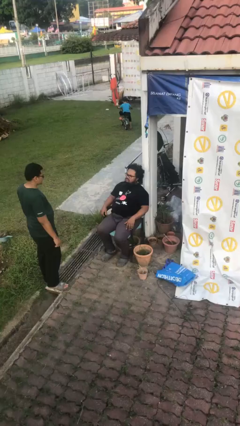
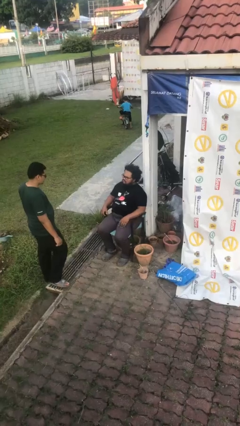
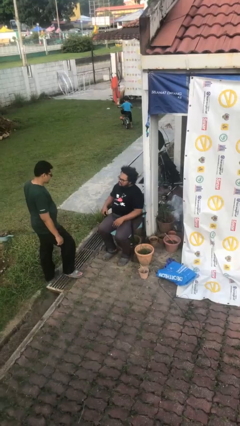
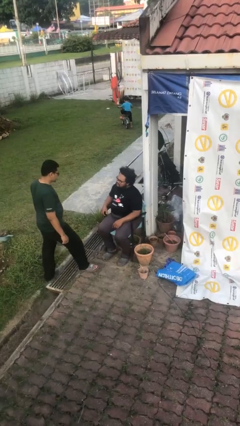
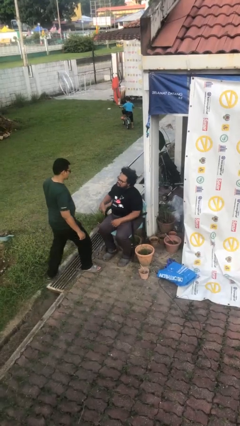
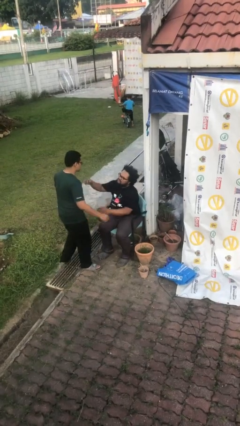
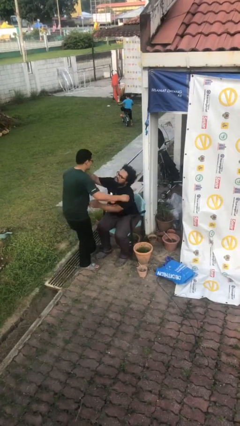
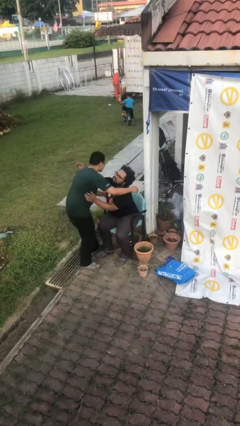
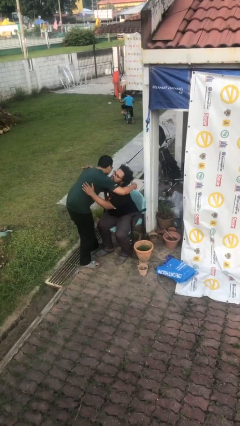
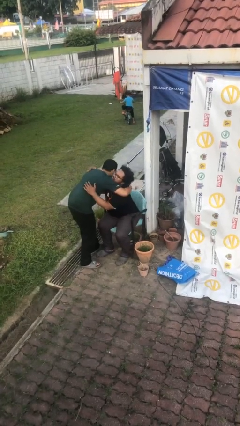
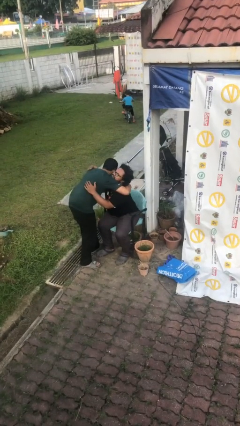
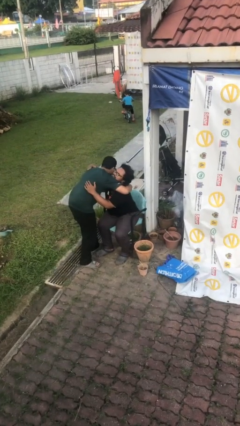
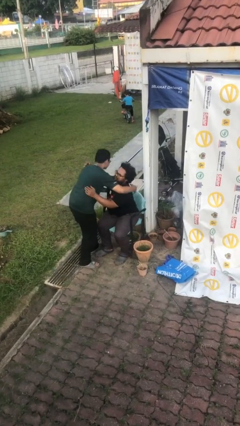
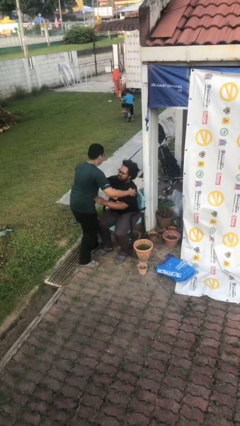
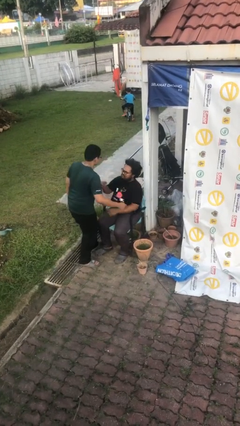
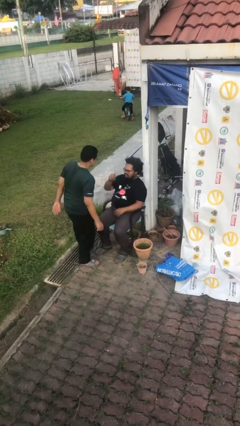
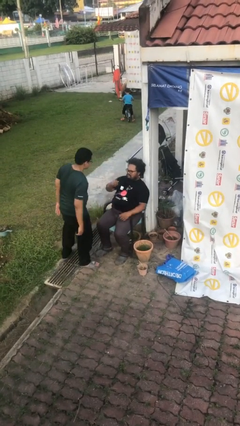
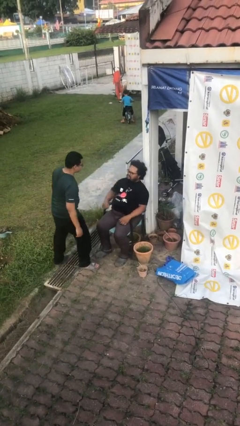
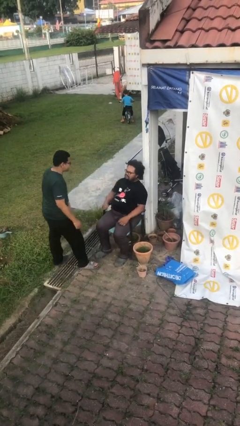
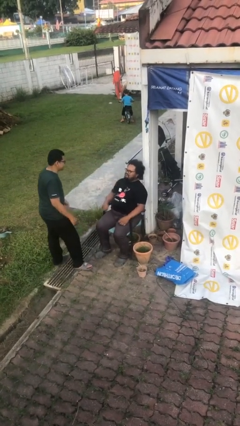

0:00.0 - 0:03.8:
person embraces person

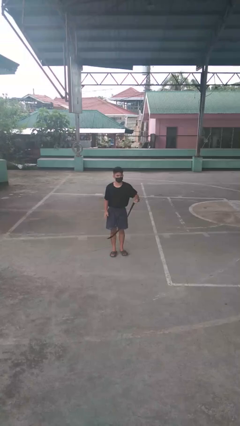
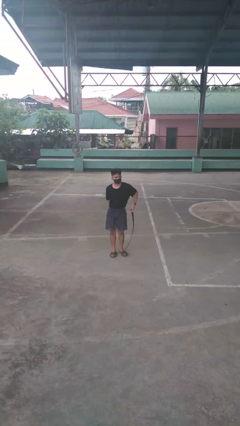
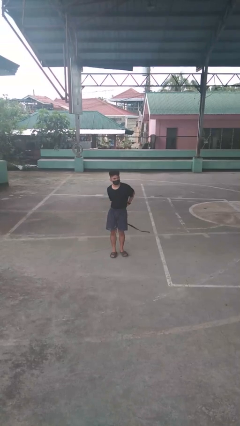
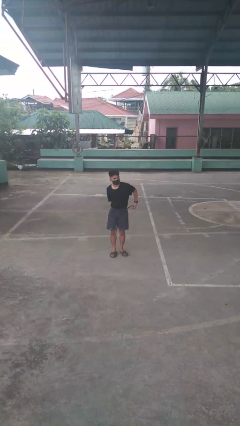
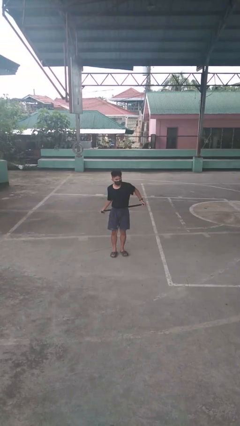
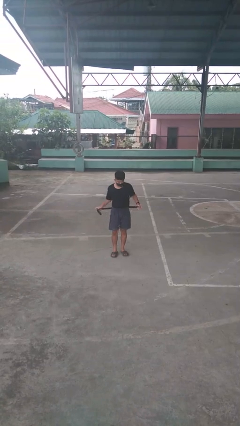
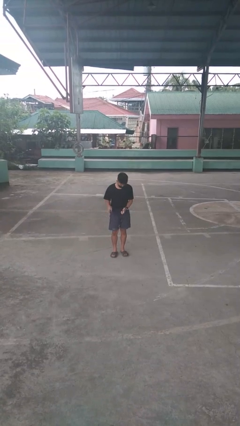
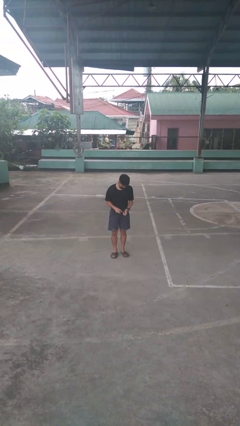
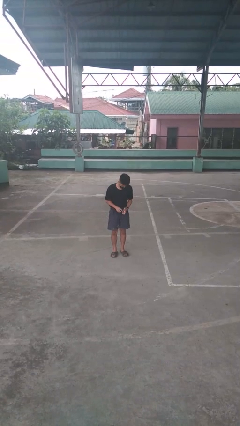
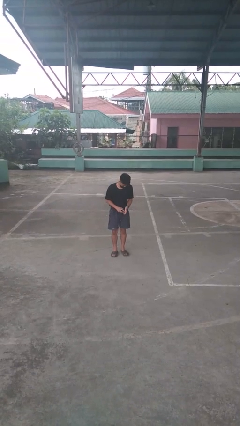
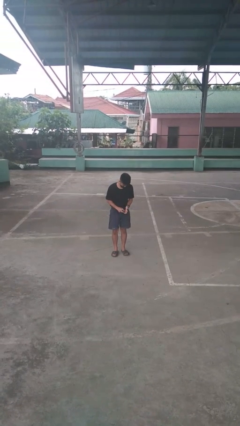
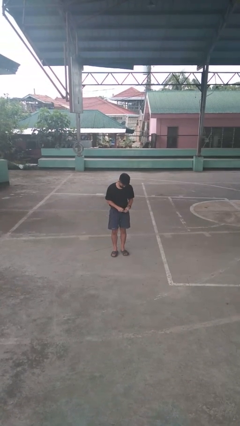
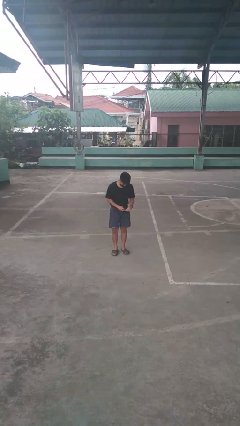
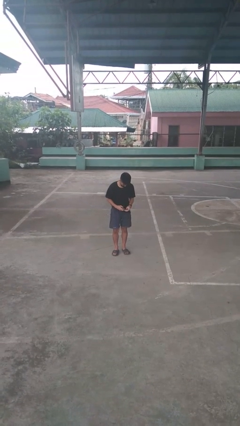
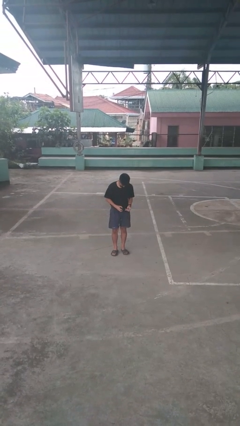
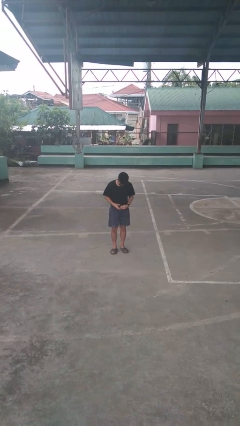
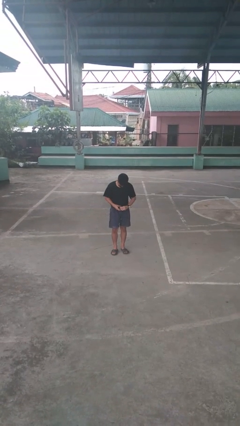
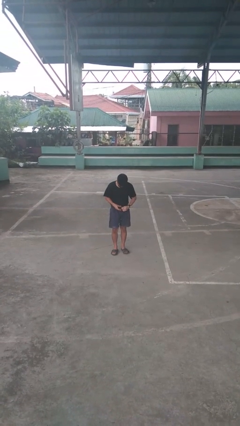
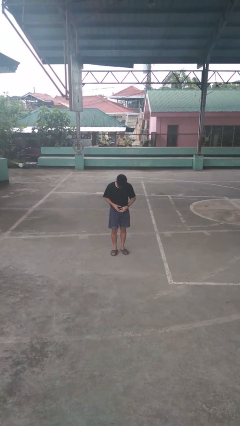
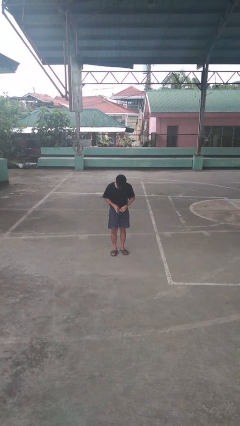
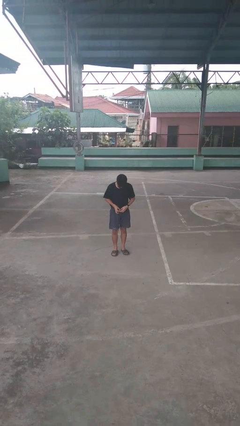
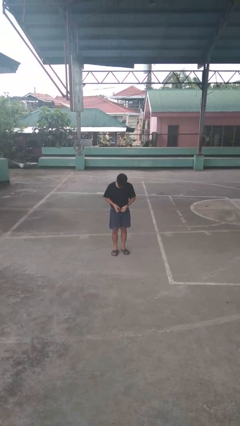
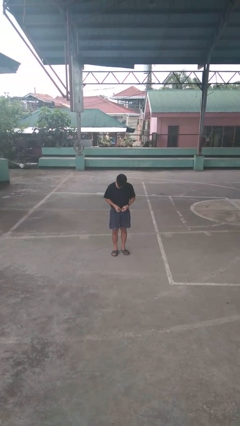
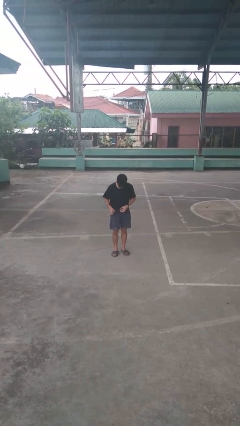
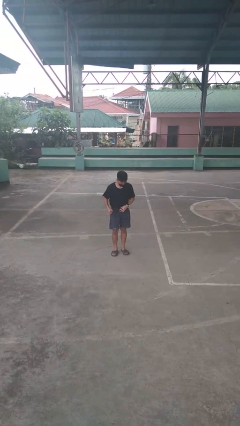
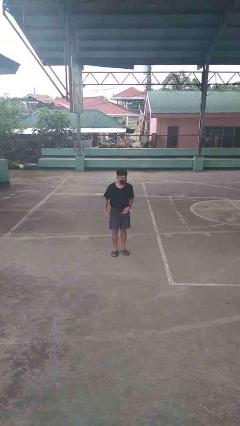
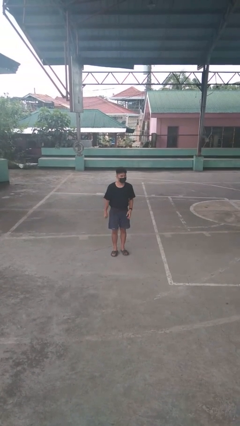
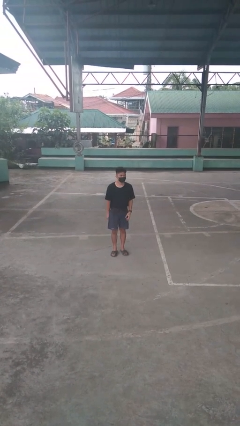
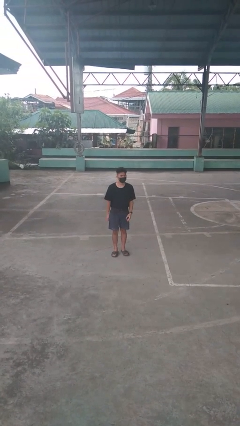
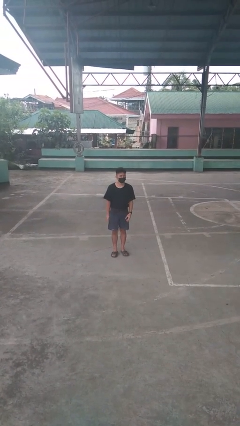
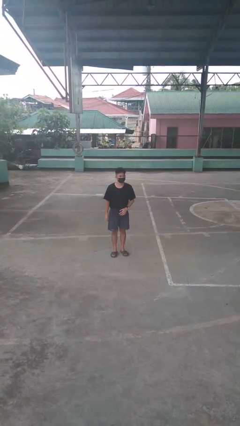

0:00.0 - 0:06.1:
person puts on belt

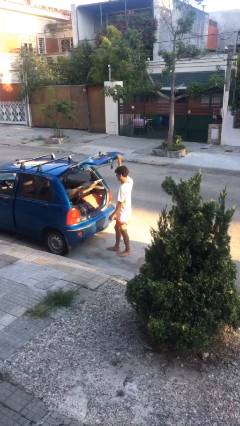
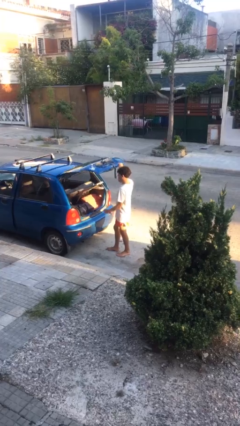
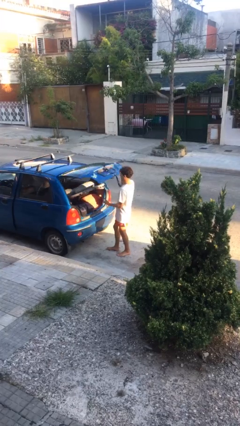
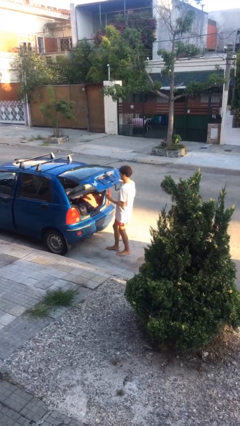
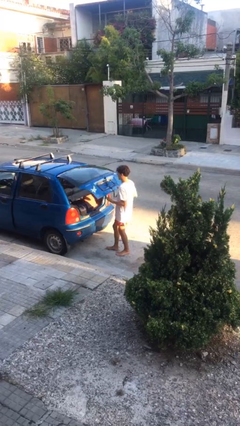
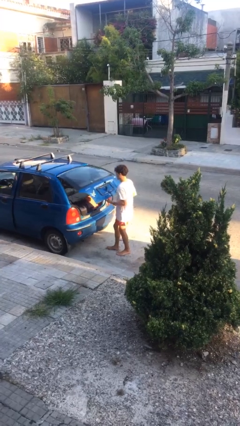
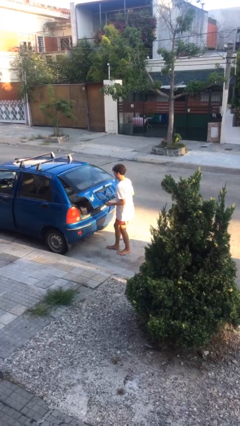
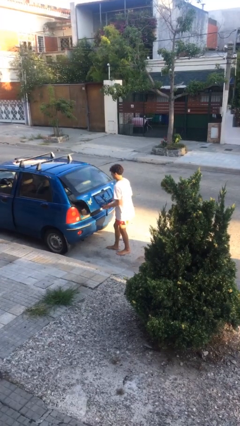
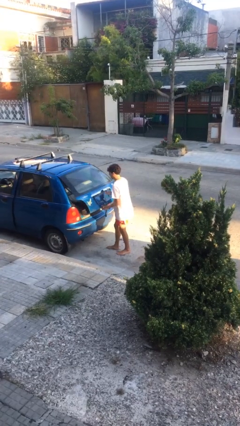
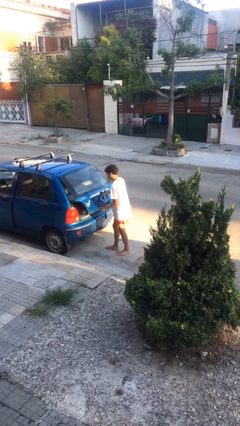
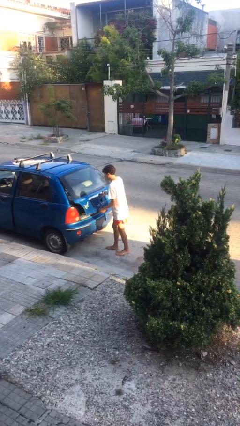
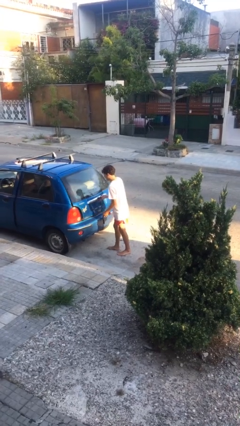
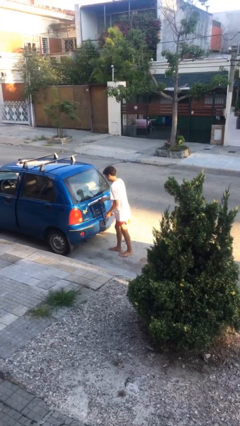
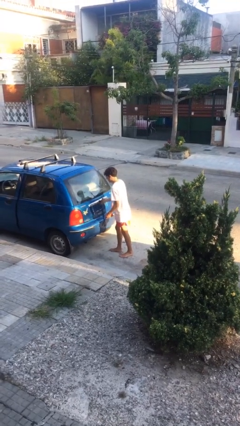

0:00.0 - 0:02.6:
person closes car trunk

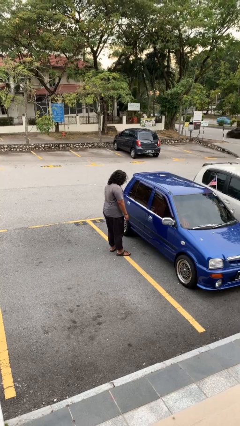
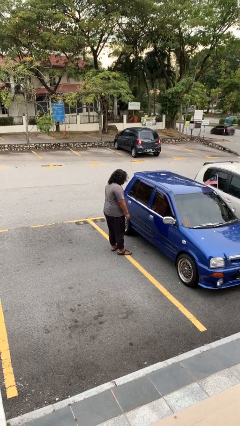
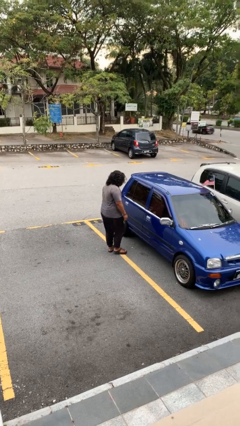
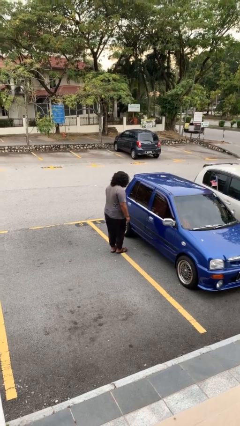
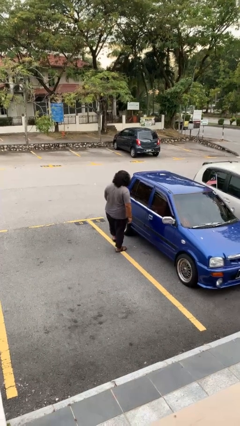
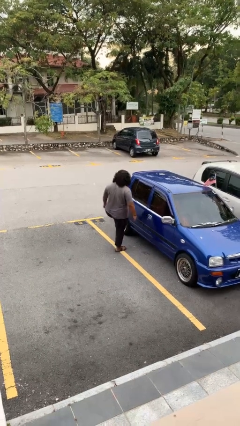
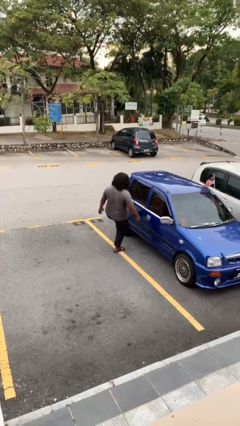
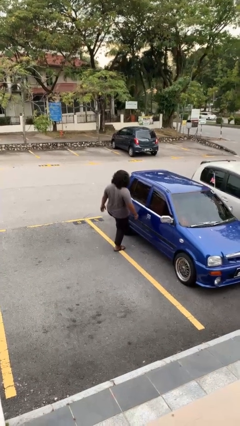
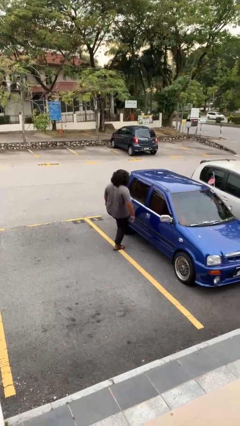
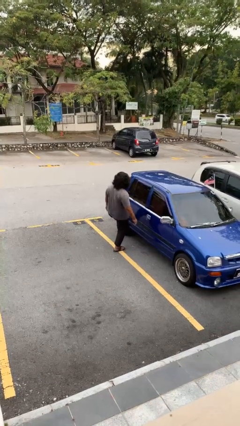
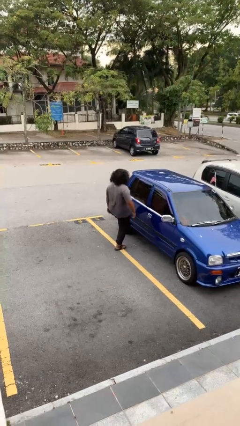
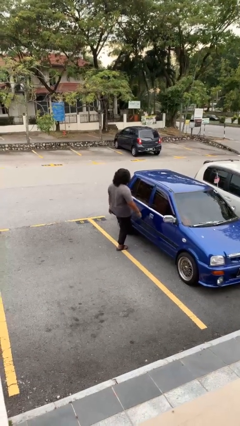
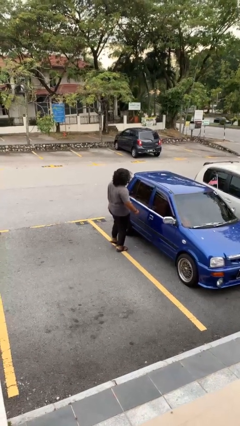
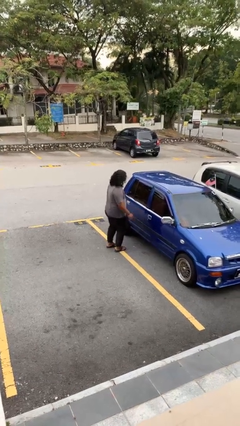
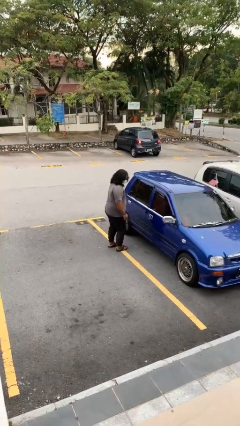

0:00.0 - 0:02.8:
person kicks car tires

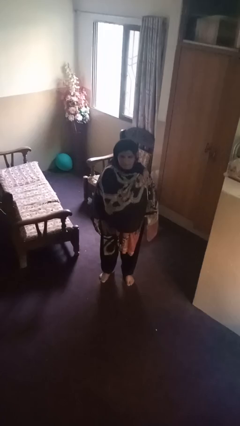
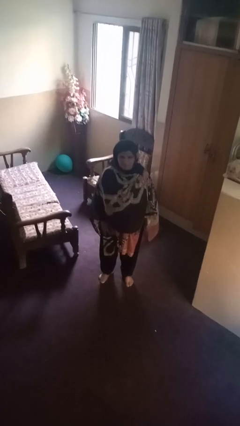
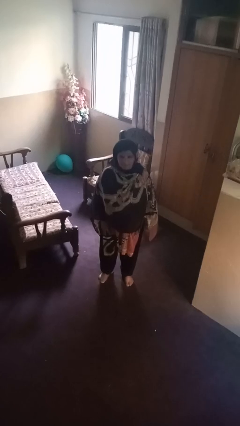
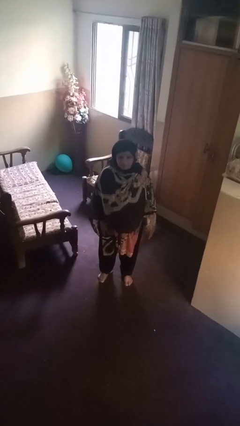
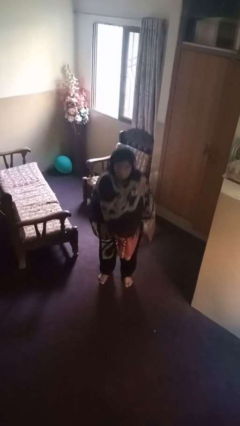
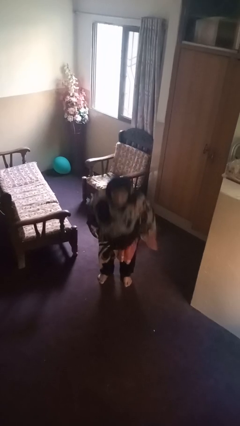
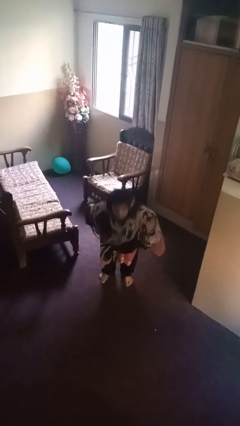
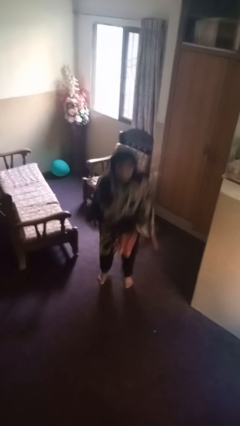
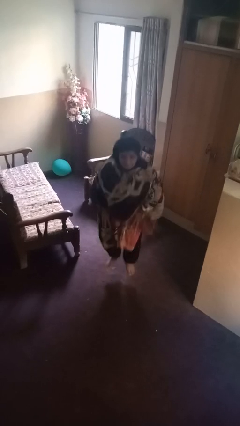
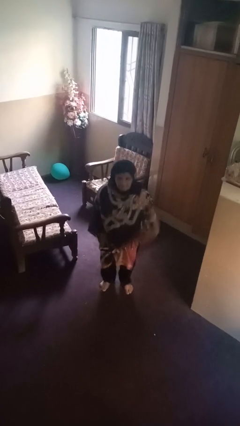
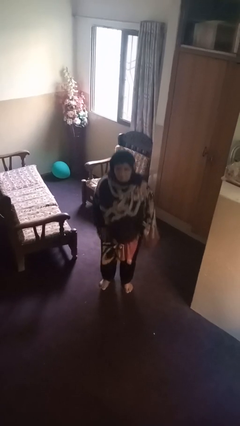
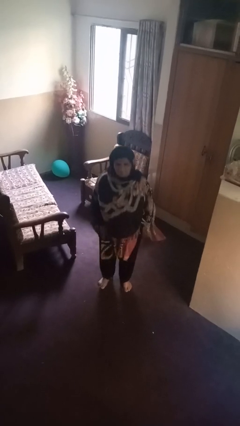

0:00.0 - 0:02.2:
person jumps

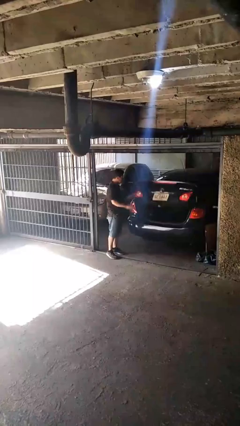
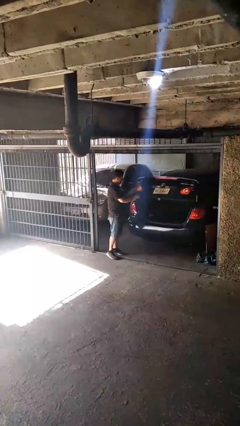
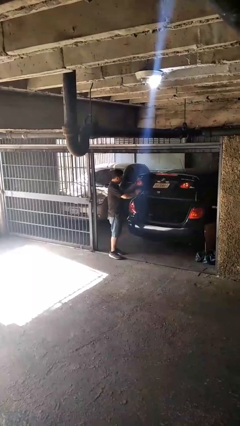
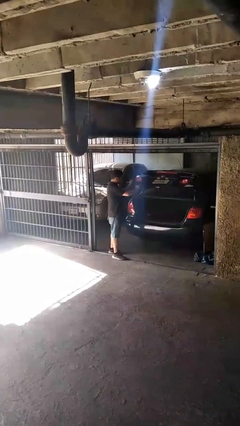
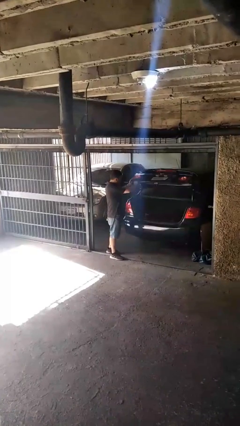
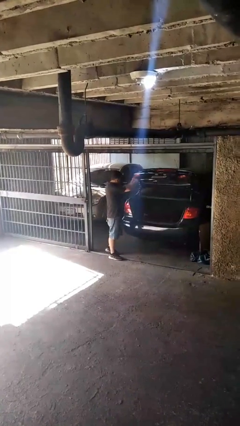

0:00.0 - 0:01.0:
person opens car trunk
